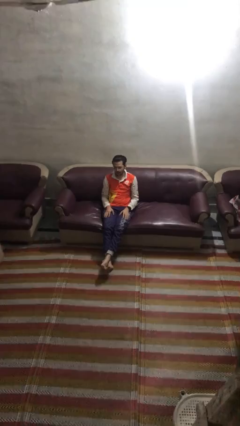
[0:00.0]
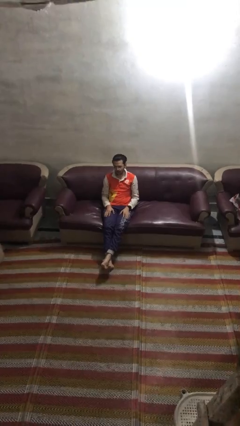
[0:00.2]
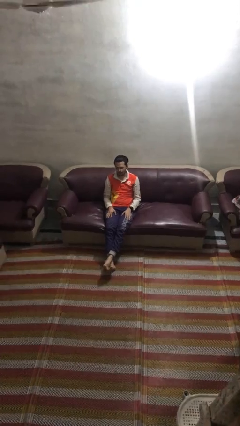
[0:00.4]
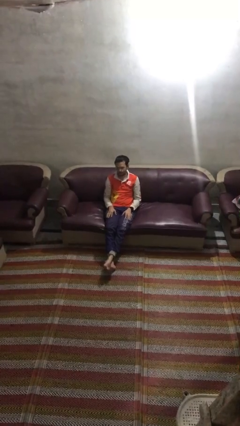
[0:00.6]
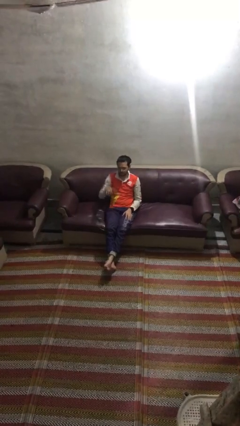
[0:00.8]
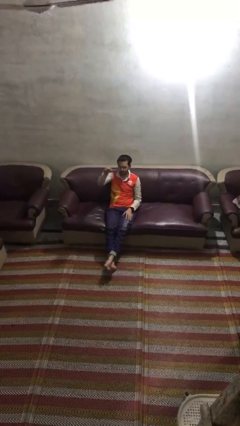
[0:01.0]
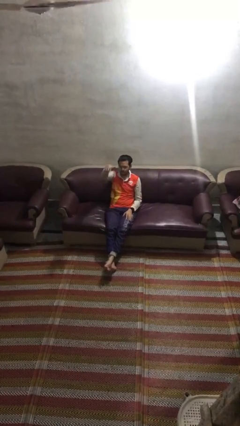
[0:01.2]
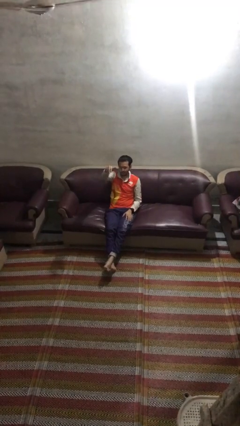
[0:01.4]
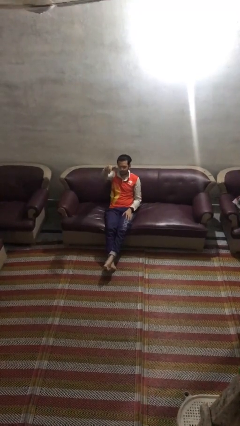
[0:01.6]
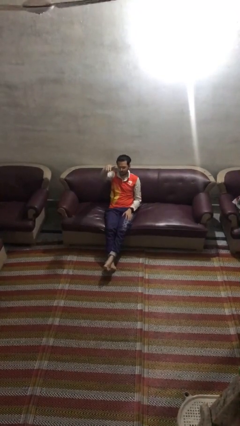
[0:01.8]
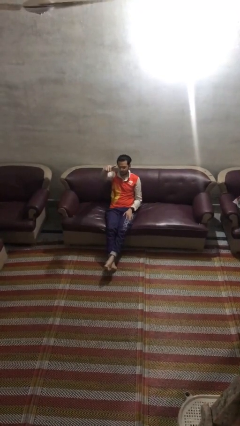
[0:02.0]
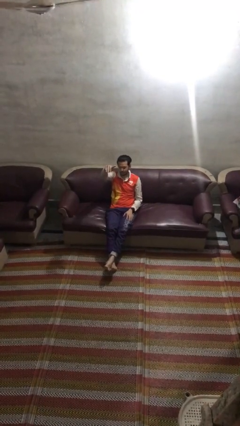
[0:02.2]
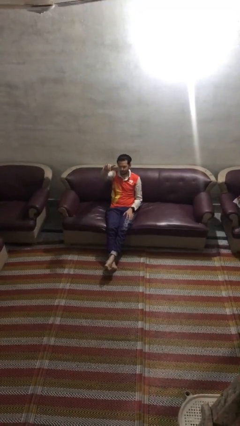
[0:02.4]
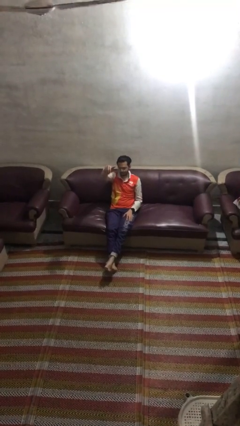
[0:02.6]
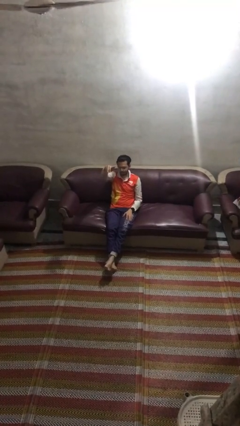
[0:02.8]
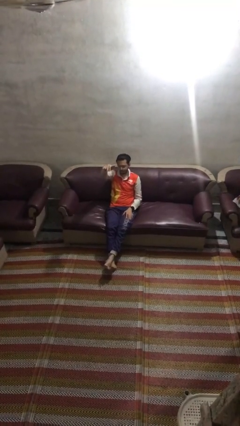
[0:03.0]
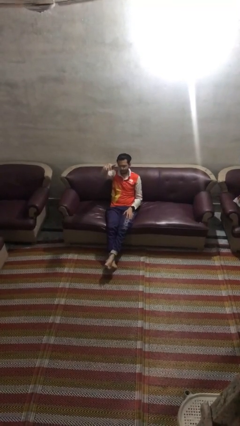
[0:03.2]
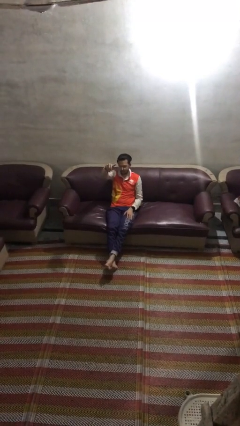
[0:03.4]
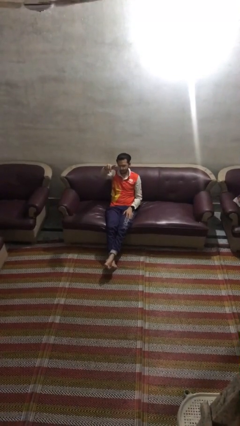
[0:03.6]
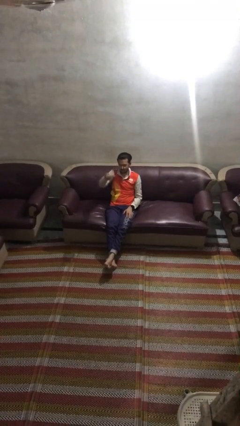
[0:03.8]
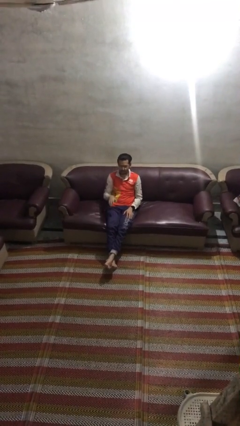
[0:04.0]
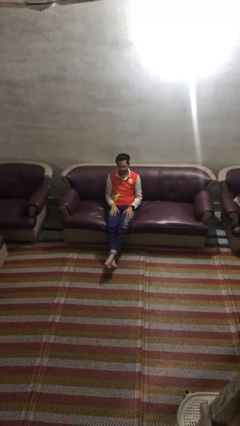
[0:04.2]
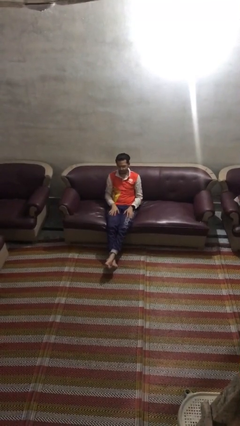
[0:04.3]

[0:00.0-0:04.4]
person gestures come here

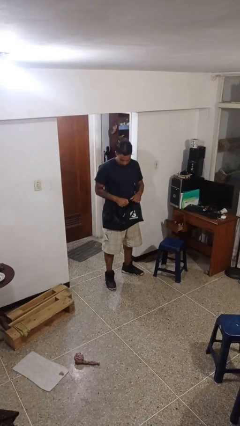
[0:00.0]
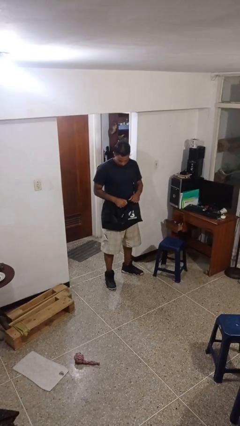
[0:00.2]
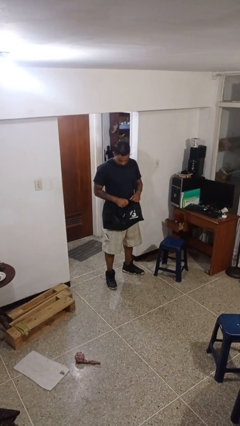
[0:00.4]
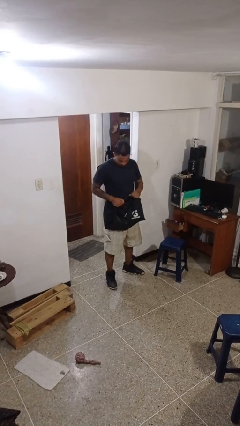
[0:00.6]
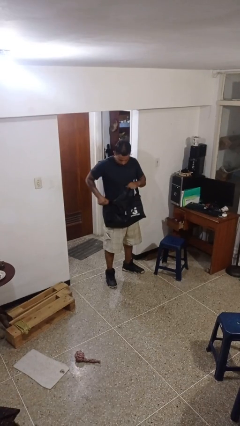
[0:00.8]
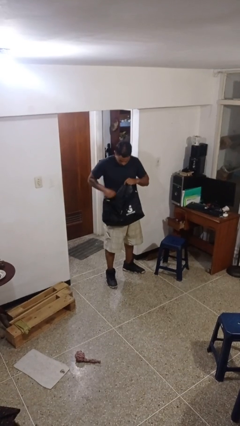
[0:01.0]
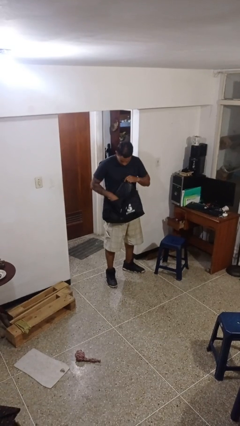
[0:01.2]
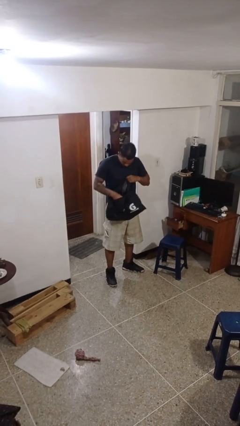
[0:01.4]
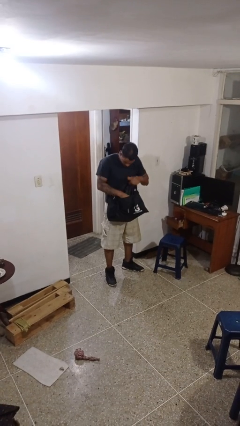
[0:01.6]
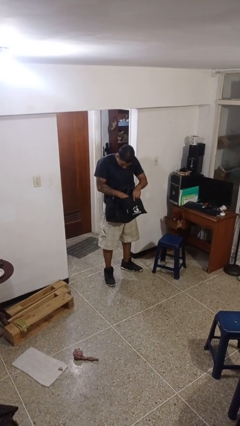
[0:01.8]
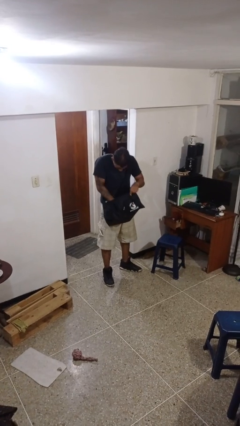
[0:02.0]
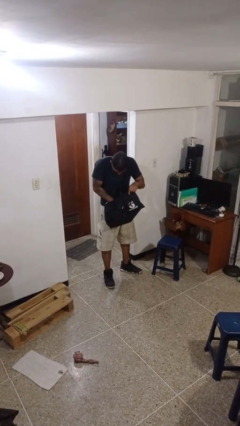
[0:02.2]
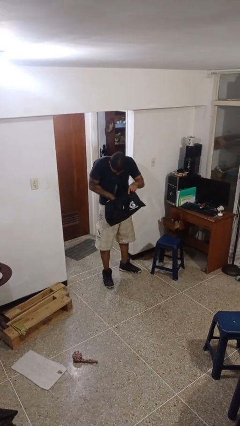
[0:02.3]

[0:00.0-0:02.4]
person searches in purse

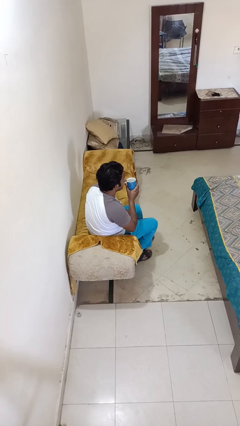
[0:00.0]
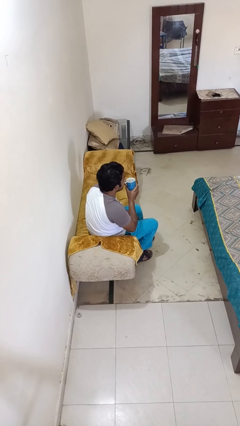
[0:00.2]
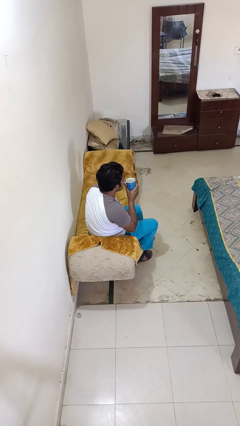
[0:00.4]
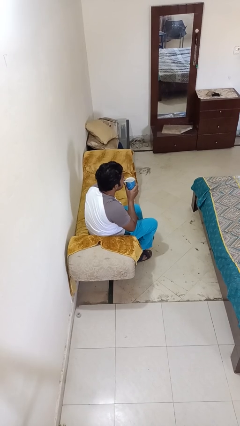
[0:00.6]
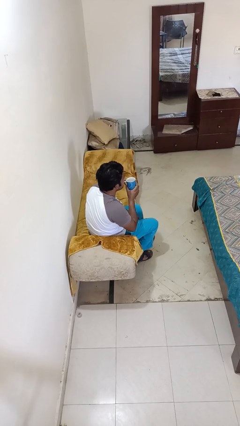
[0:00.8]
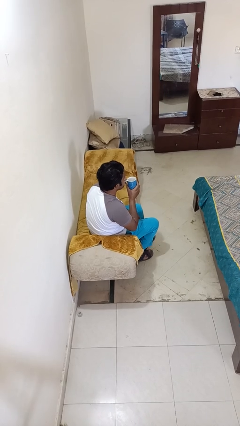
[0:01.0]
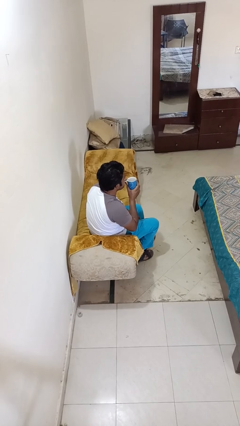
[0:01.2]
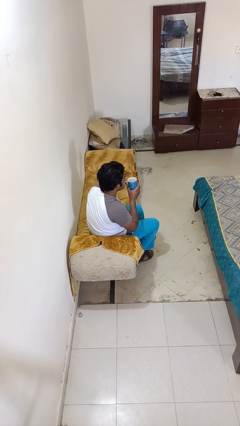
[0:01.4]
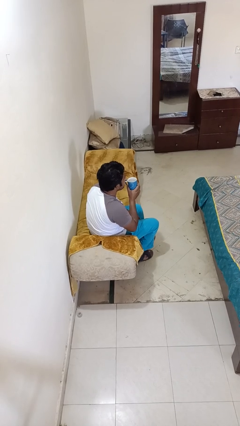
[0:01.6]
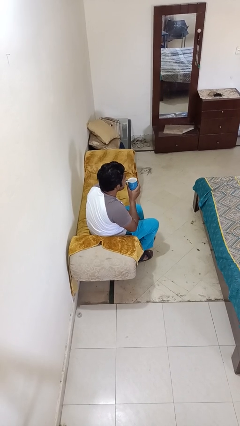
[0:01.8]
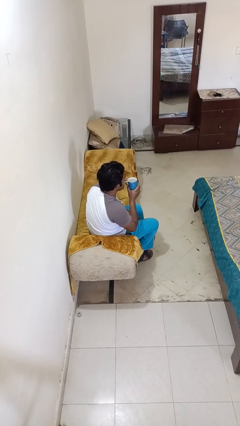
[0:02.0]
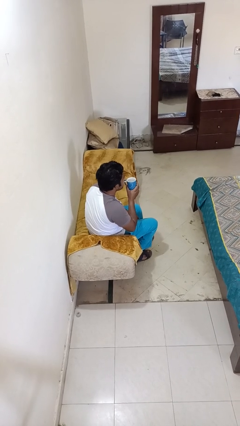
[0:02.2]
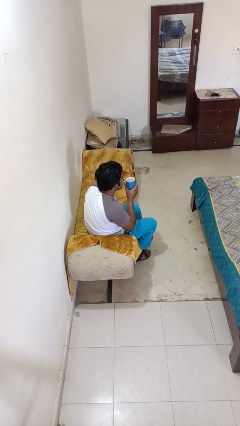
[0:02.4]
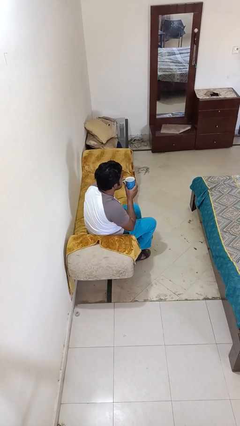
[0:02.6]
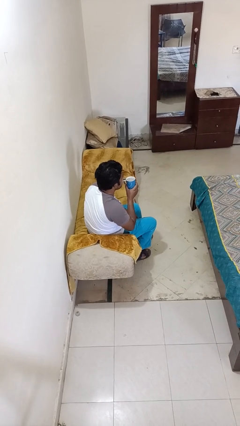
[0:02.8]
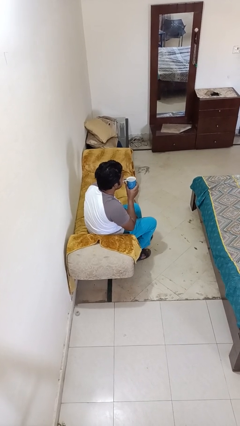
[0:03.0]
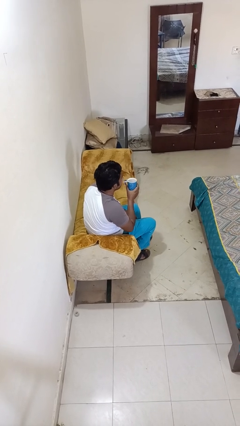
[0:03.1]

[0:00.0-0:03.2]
person drinks from straw

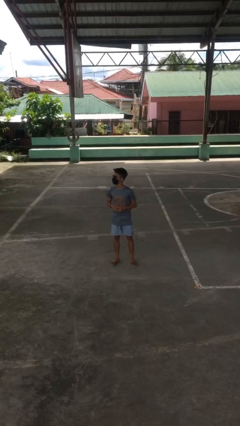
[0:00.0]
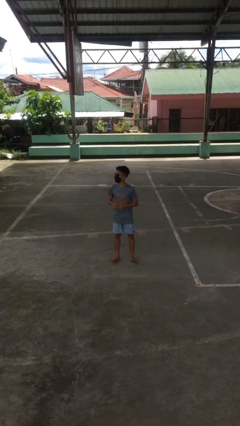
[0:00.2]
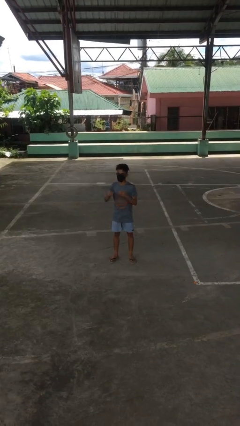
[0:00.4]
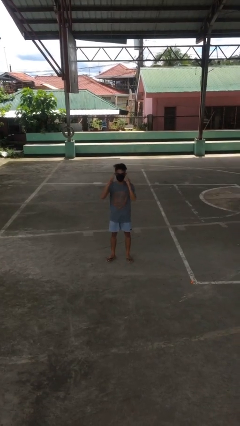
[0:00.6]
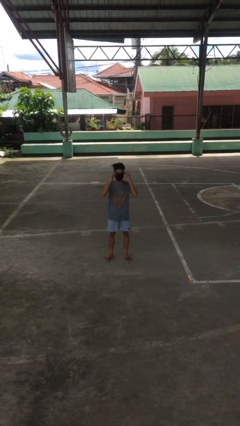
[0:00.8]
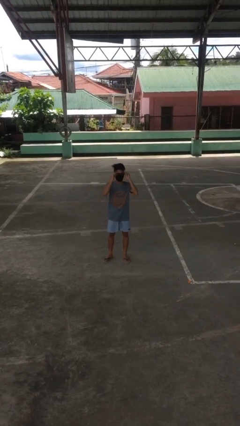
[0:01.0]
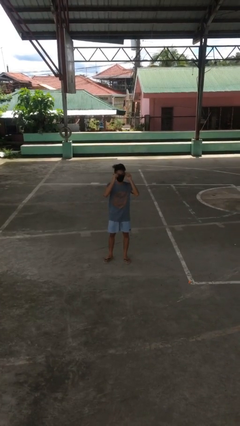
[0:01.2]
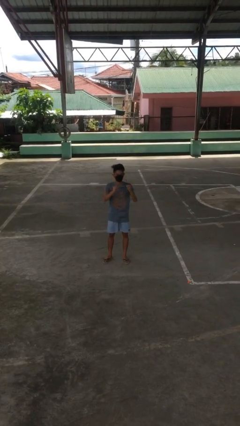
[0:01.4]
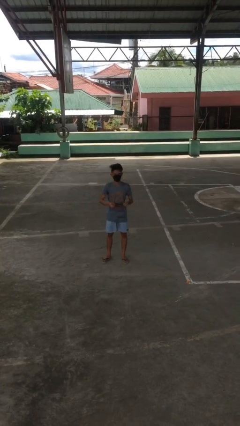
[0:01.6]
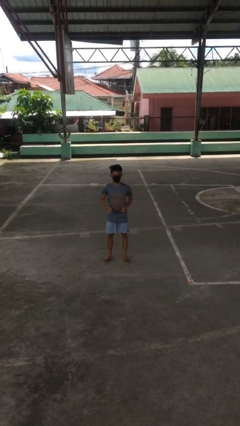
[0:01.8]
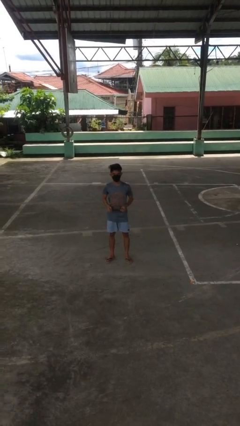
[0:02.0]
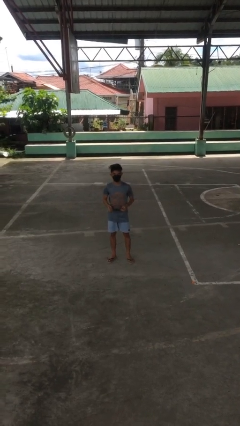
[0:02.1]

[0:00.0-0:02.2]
person takes off glasses

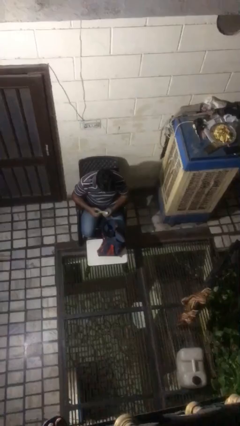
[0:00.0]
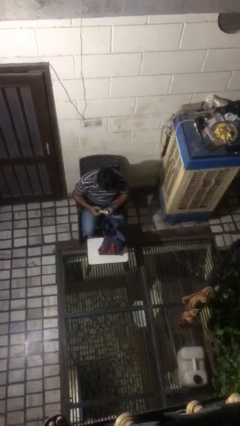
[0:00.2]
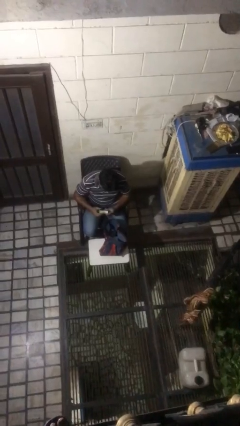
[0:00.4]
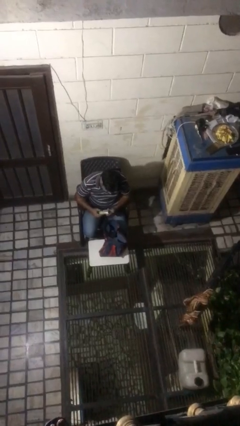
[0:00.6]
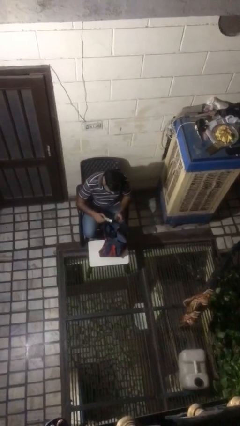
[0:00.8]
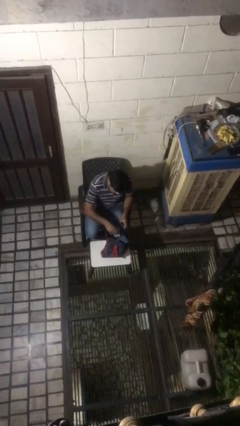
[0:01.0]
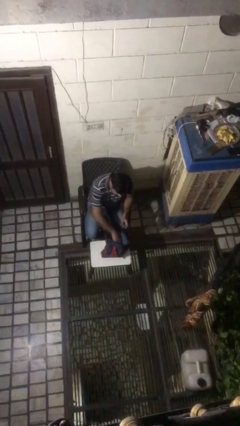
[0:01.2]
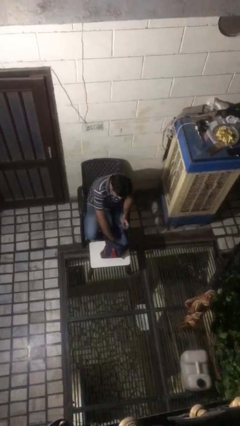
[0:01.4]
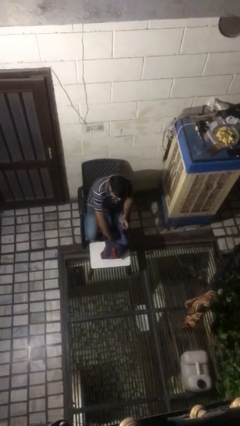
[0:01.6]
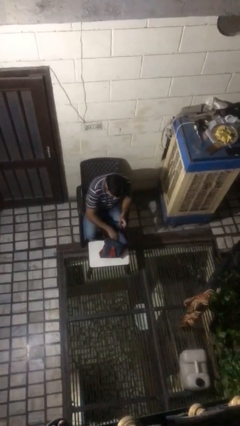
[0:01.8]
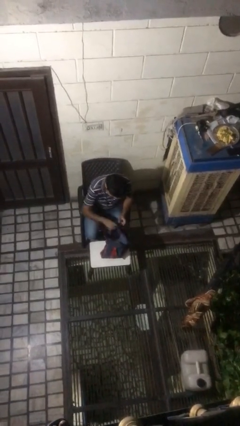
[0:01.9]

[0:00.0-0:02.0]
person puts object into bag

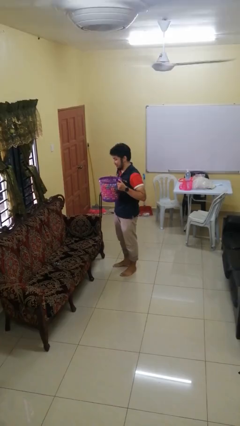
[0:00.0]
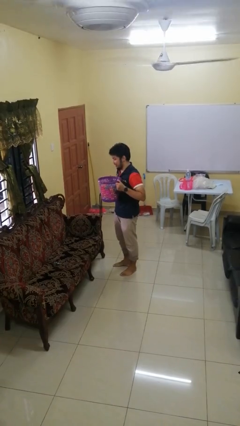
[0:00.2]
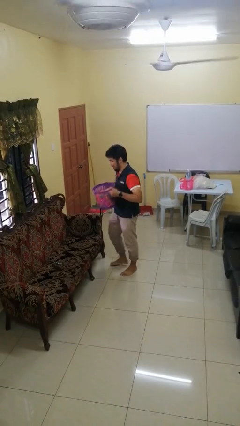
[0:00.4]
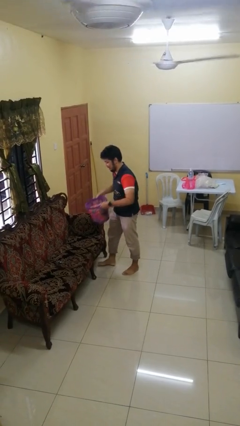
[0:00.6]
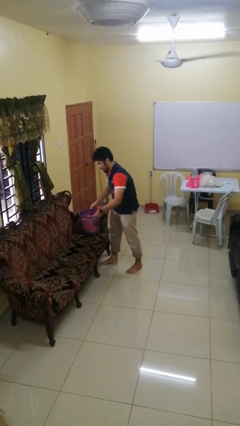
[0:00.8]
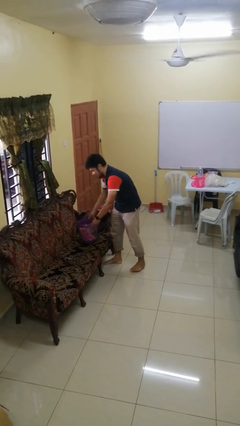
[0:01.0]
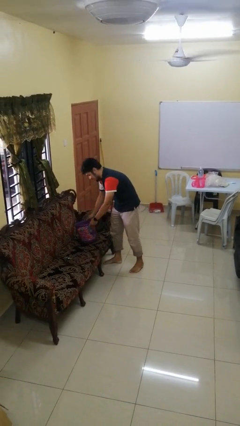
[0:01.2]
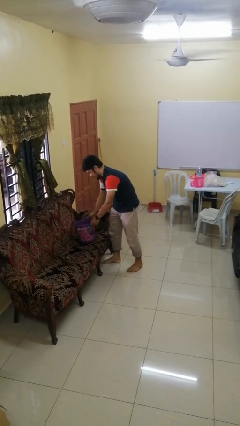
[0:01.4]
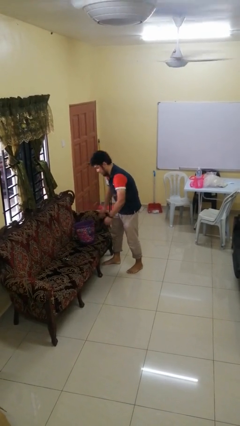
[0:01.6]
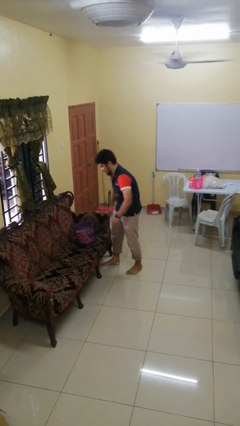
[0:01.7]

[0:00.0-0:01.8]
person puts down object on couch

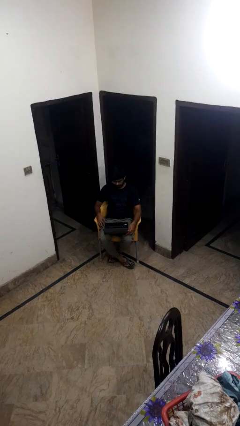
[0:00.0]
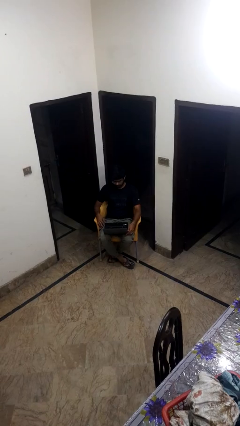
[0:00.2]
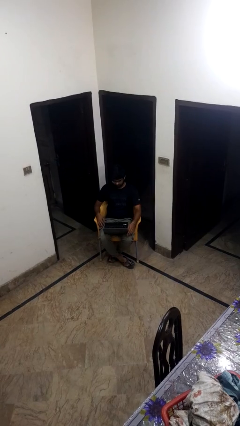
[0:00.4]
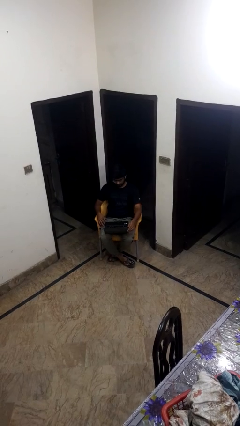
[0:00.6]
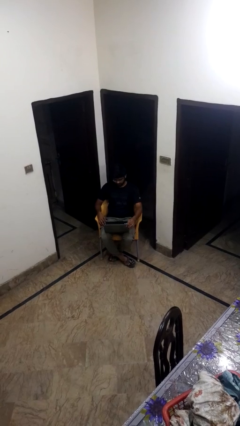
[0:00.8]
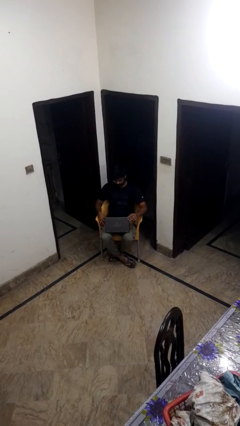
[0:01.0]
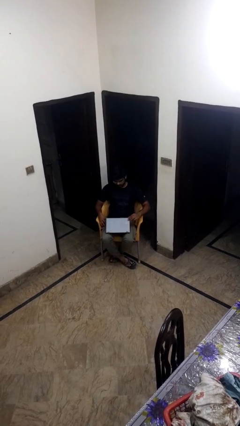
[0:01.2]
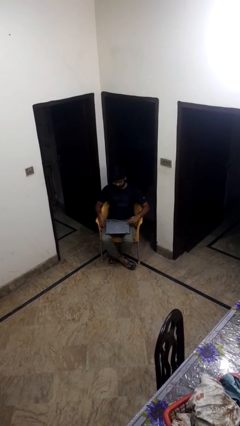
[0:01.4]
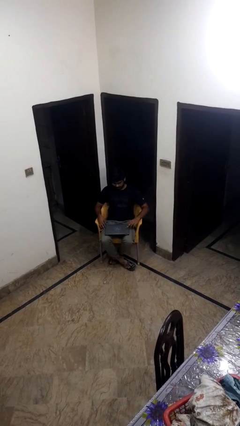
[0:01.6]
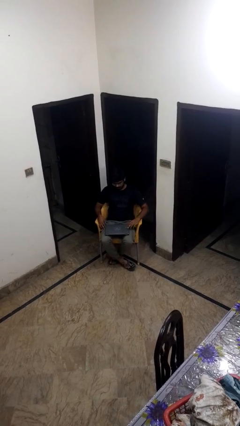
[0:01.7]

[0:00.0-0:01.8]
person closes laptop
